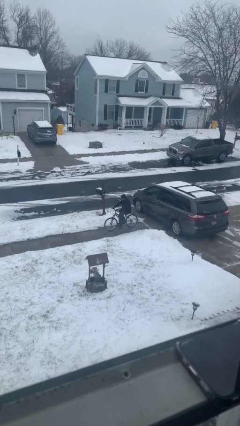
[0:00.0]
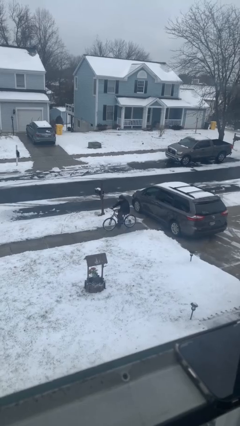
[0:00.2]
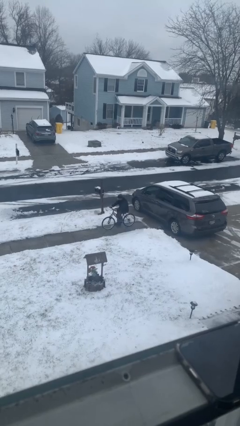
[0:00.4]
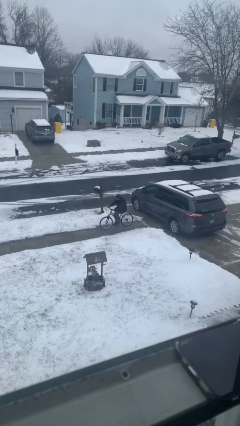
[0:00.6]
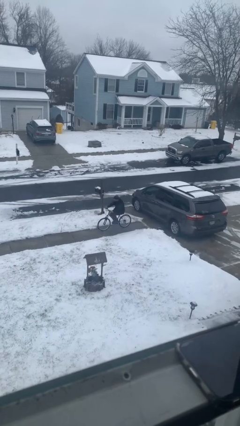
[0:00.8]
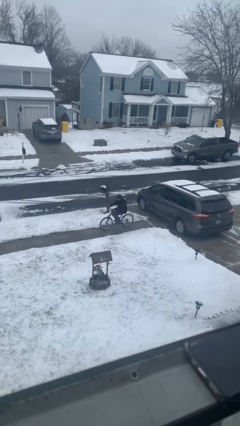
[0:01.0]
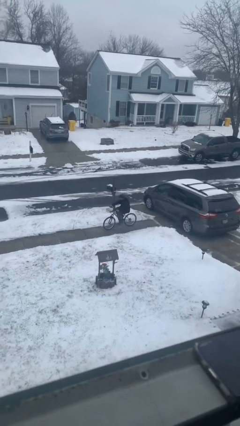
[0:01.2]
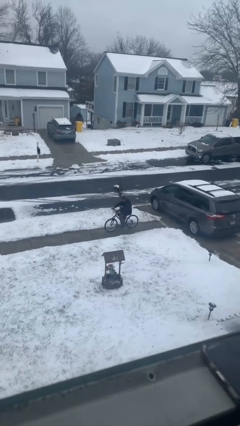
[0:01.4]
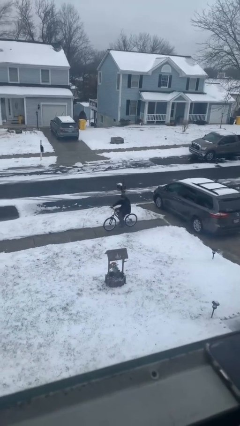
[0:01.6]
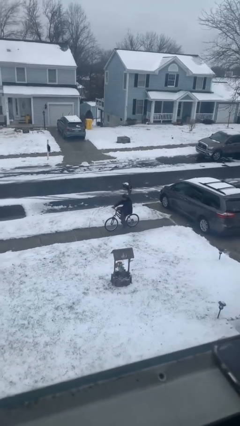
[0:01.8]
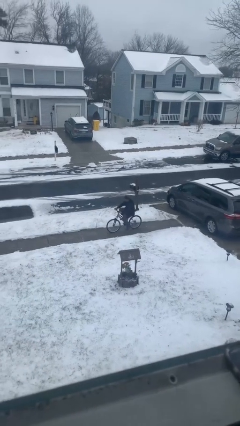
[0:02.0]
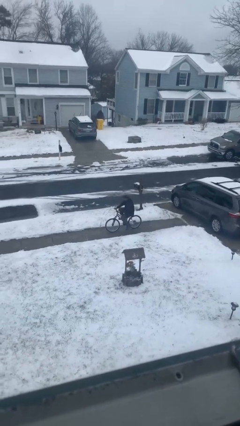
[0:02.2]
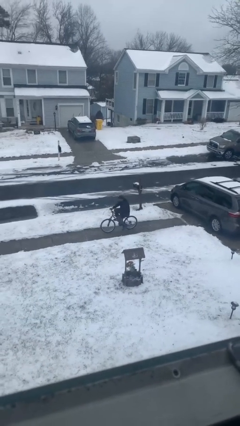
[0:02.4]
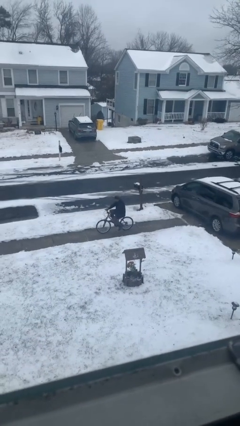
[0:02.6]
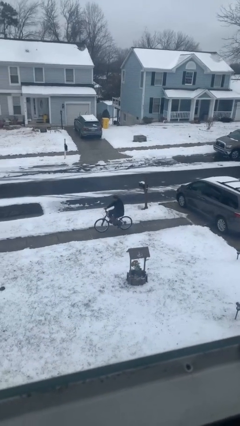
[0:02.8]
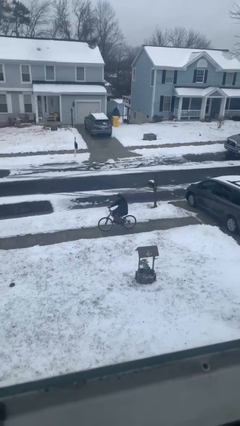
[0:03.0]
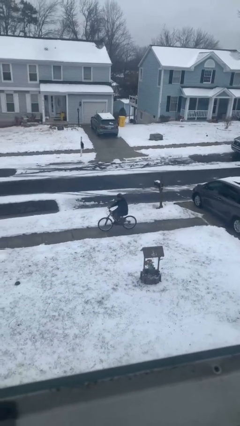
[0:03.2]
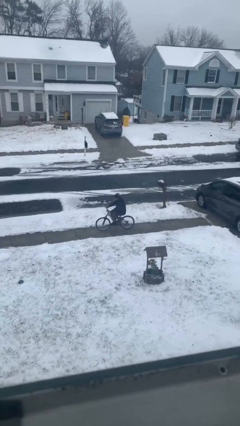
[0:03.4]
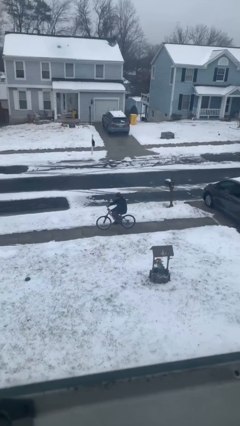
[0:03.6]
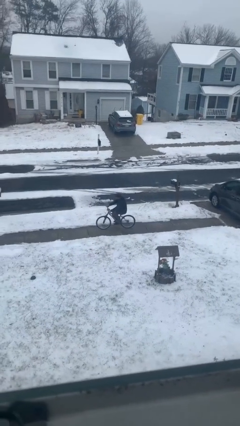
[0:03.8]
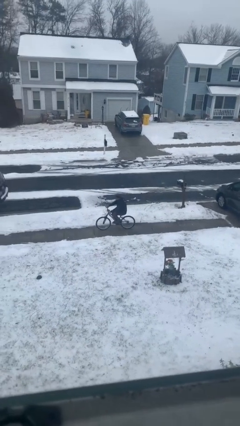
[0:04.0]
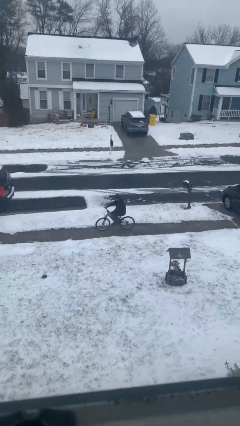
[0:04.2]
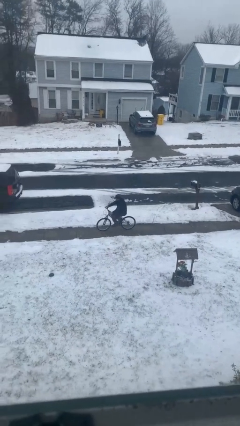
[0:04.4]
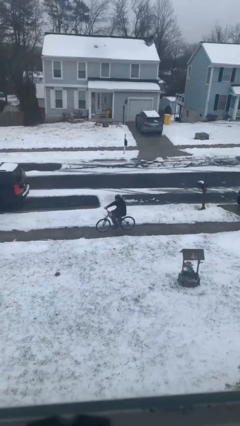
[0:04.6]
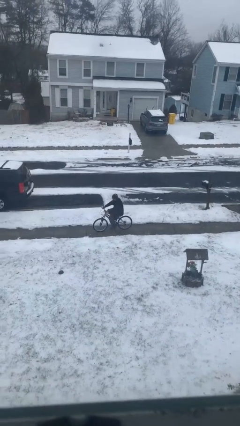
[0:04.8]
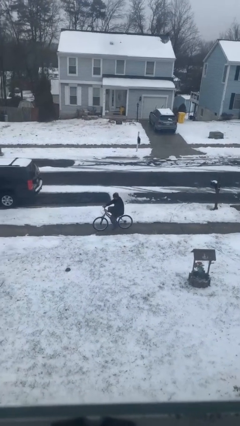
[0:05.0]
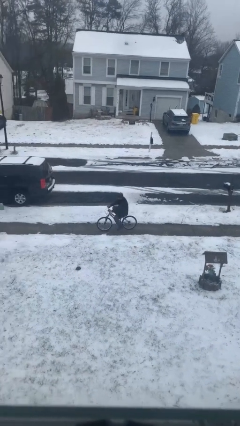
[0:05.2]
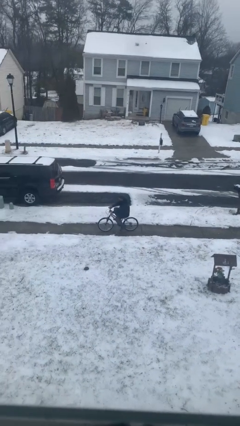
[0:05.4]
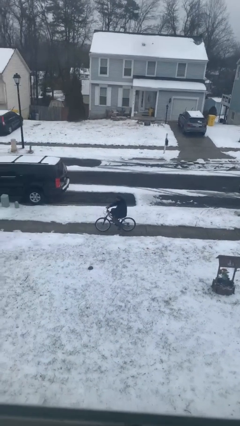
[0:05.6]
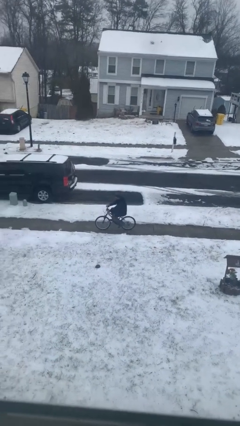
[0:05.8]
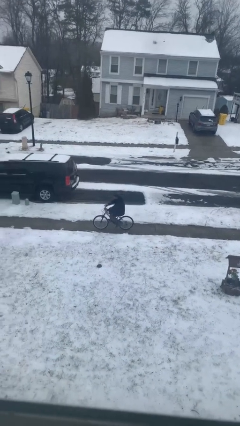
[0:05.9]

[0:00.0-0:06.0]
person rides bicycle

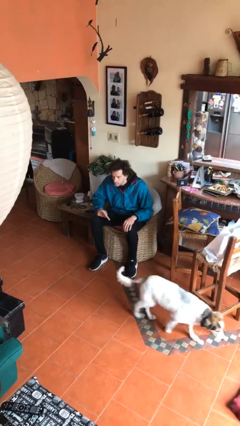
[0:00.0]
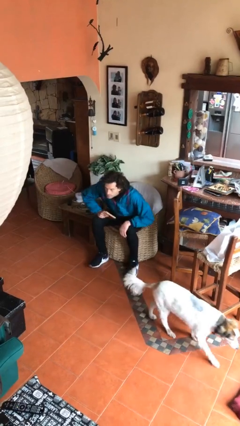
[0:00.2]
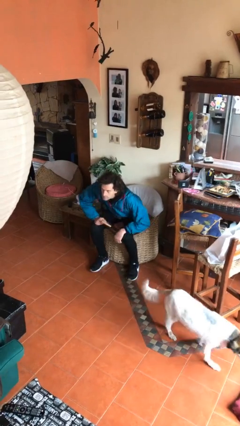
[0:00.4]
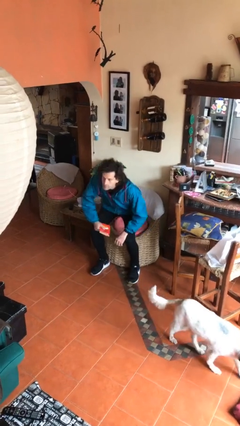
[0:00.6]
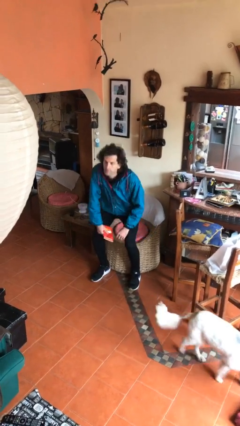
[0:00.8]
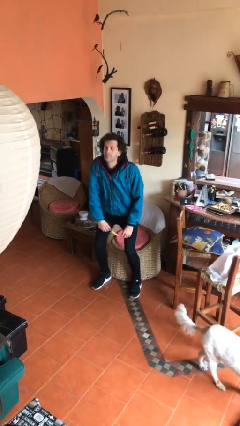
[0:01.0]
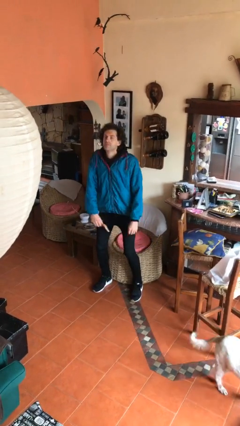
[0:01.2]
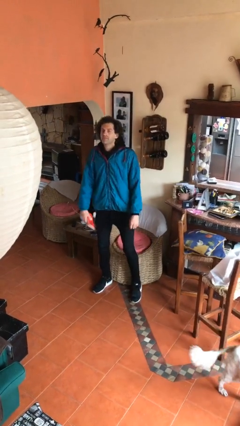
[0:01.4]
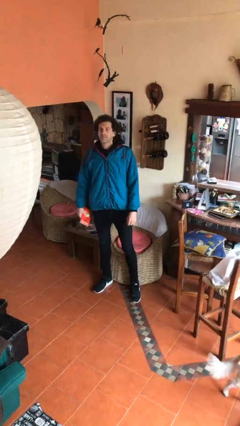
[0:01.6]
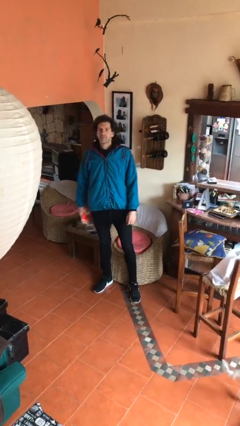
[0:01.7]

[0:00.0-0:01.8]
person stands up

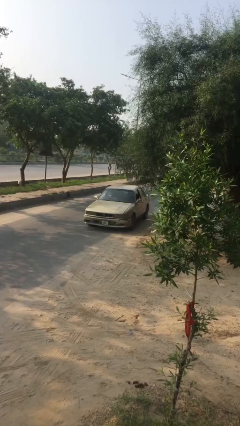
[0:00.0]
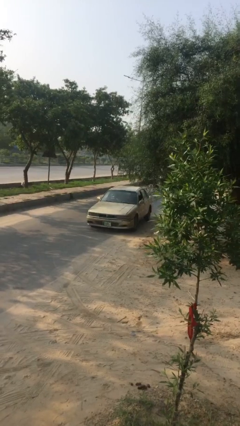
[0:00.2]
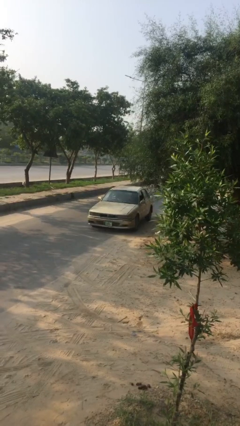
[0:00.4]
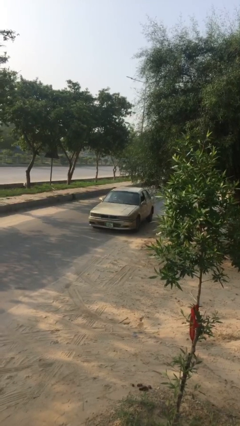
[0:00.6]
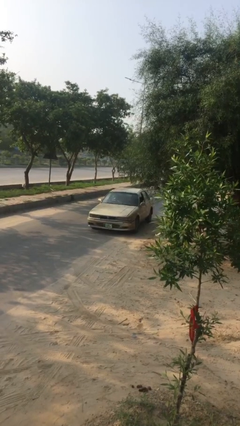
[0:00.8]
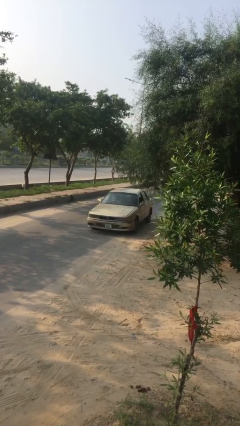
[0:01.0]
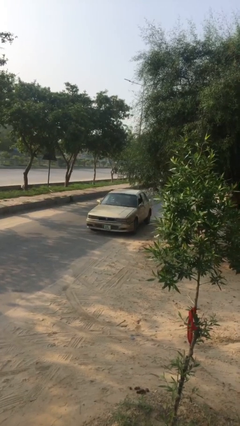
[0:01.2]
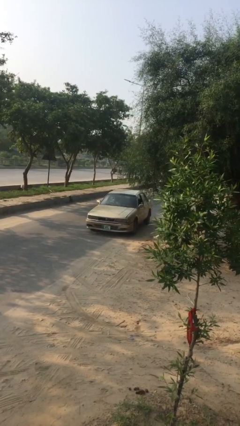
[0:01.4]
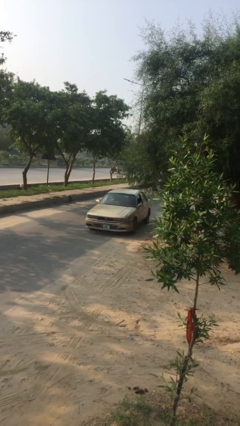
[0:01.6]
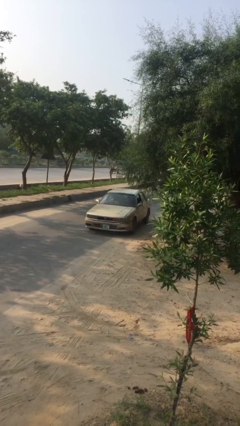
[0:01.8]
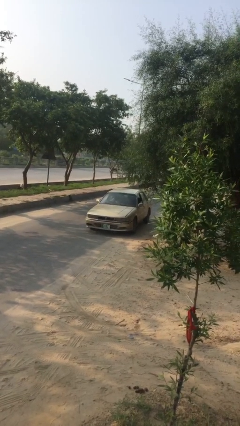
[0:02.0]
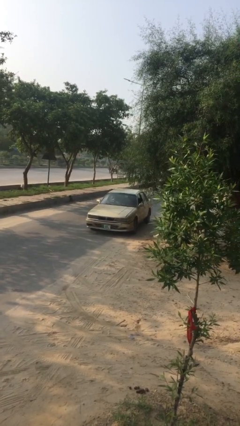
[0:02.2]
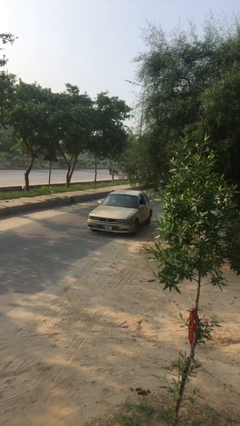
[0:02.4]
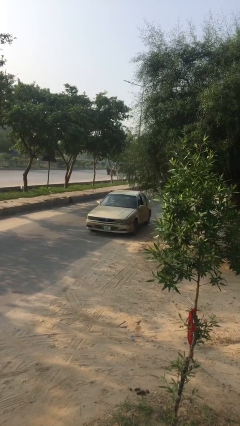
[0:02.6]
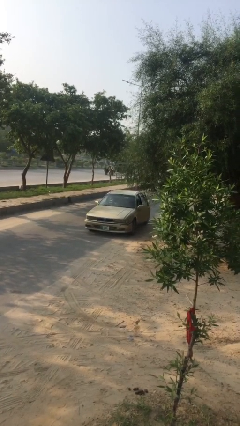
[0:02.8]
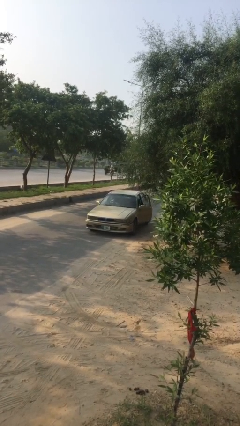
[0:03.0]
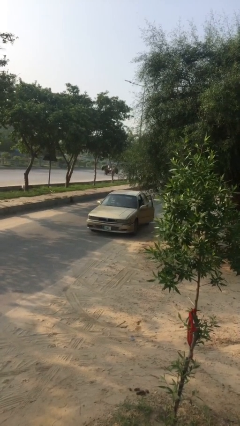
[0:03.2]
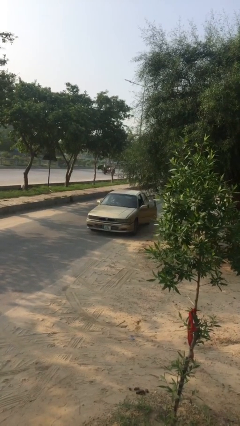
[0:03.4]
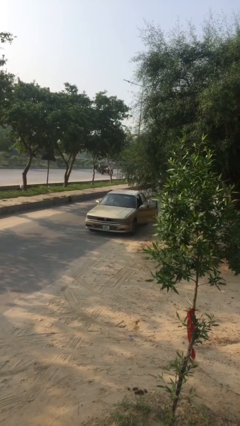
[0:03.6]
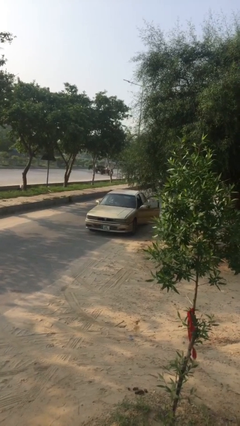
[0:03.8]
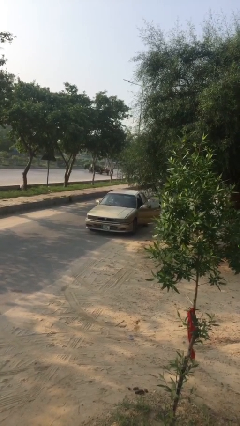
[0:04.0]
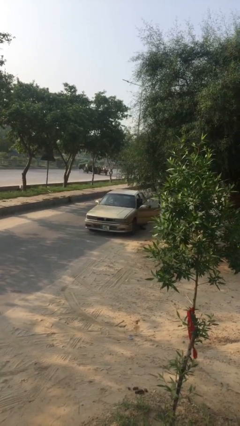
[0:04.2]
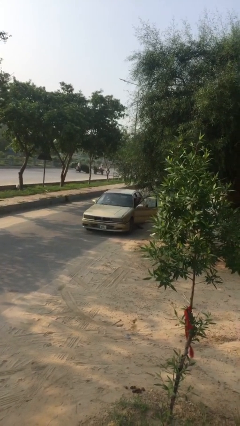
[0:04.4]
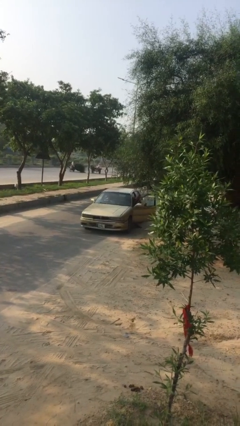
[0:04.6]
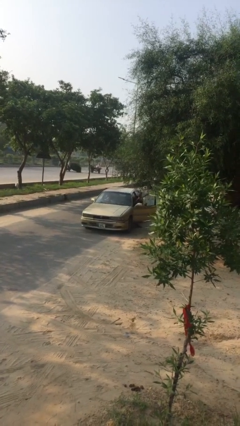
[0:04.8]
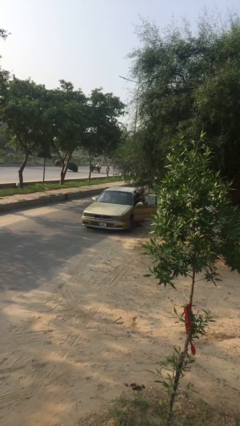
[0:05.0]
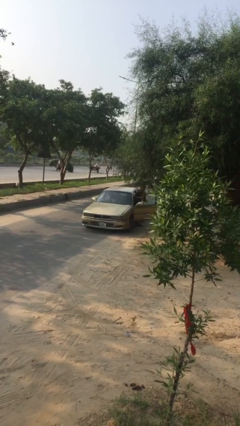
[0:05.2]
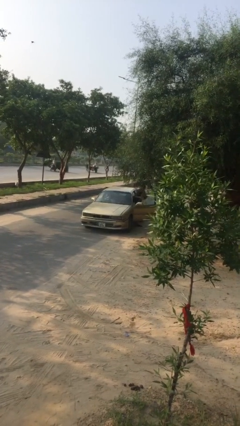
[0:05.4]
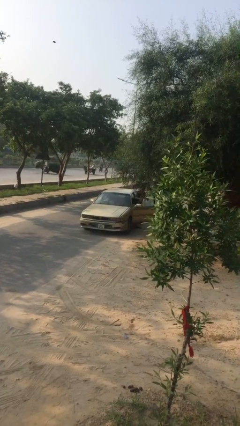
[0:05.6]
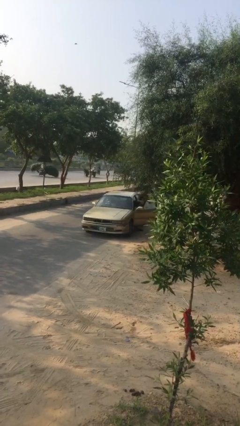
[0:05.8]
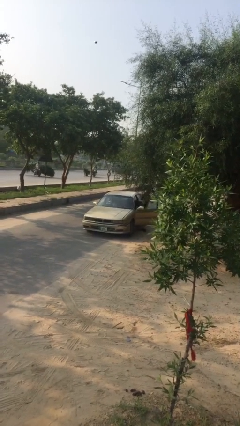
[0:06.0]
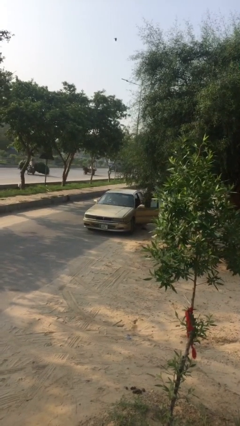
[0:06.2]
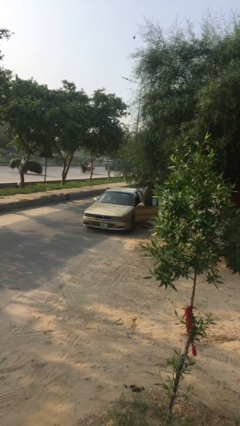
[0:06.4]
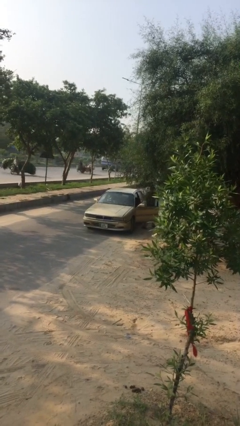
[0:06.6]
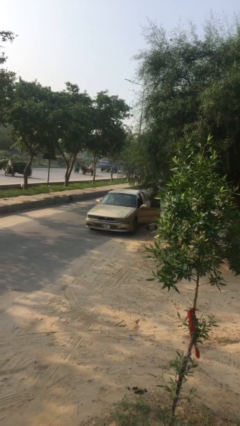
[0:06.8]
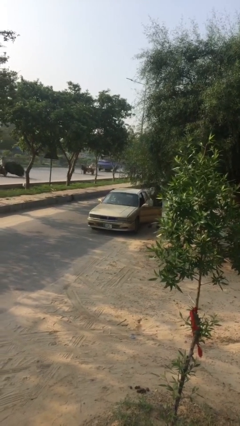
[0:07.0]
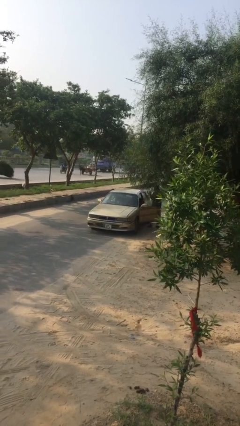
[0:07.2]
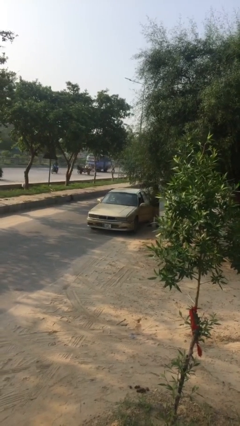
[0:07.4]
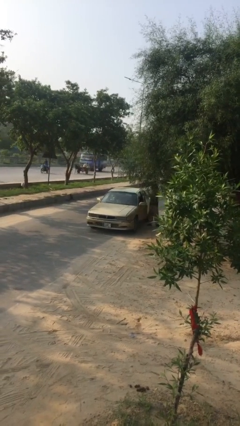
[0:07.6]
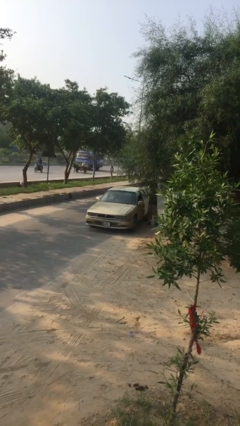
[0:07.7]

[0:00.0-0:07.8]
car drops off person

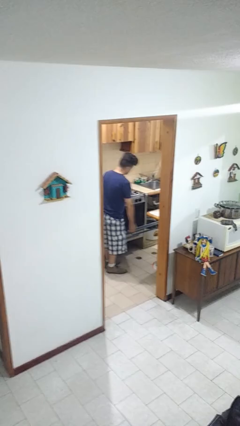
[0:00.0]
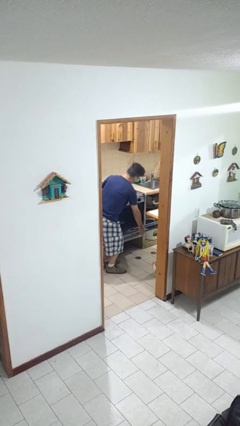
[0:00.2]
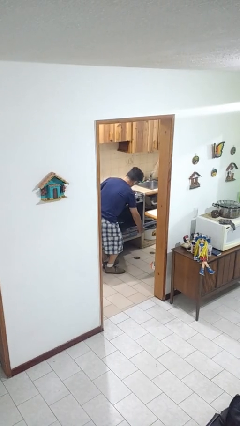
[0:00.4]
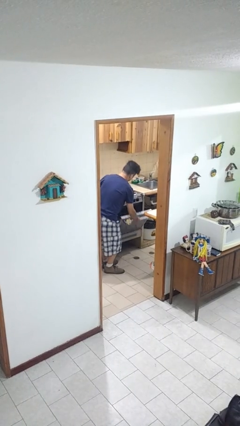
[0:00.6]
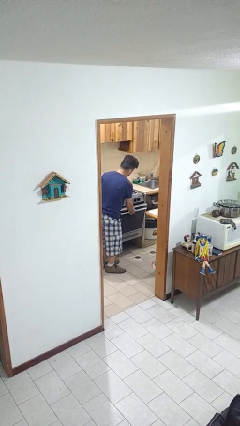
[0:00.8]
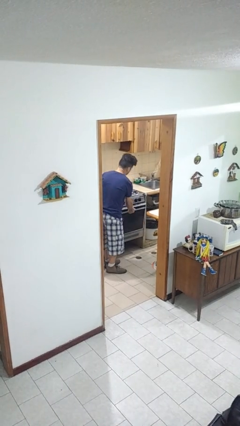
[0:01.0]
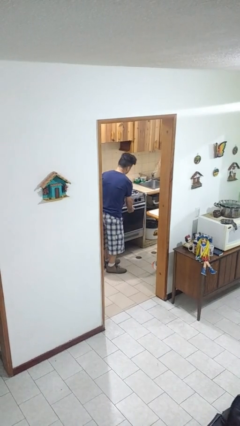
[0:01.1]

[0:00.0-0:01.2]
person closes oven door

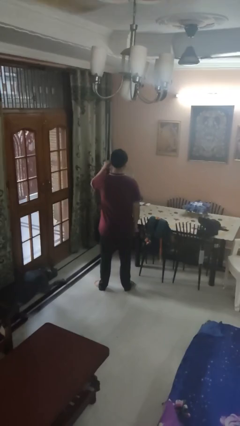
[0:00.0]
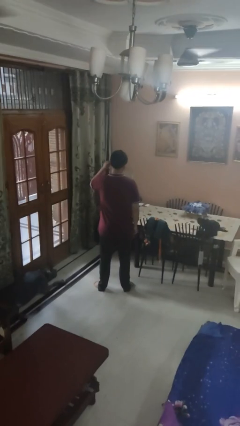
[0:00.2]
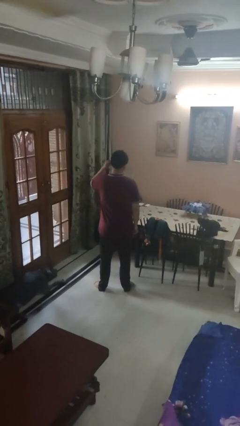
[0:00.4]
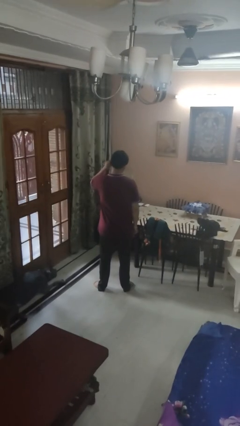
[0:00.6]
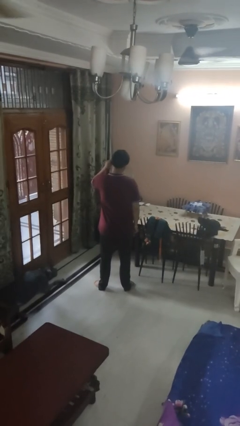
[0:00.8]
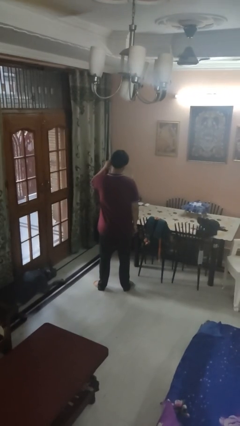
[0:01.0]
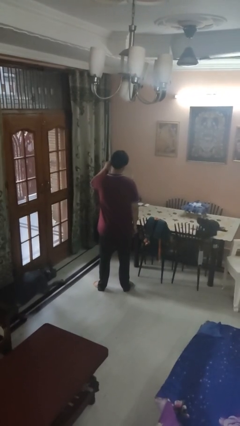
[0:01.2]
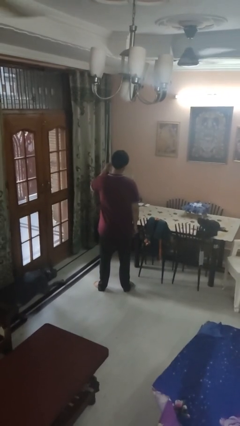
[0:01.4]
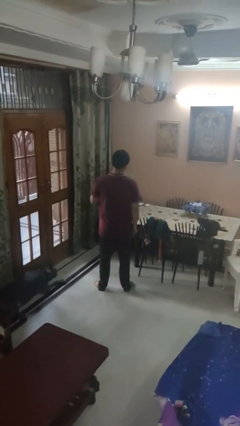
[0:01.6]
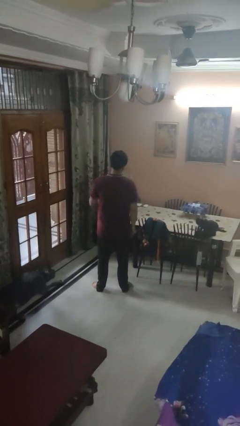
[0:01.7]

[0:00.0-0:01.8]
person touches earlobe
